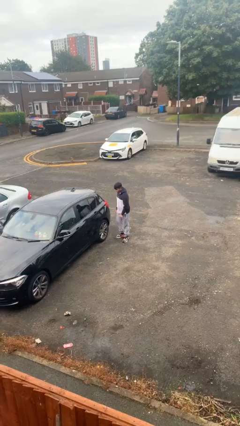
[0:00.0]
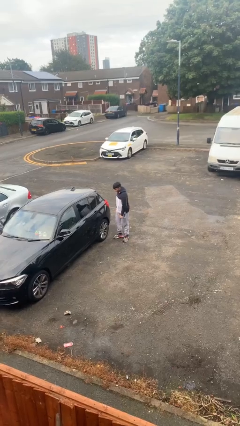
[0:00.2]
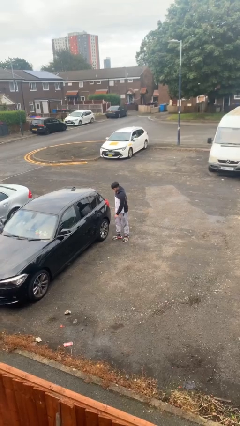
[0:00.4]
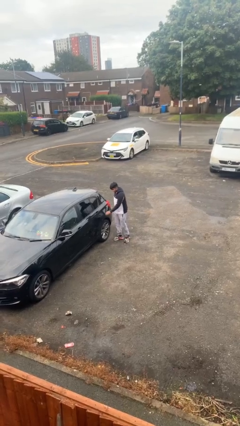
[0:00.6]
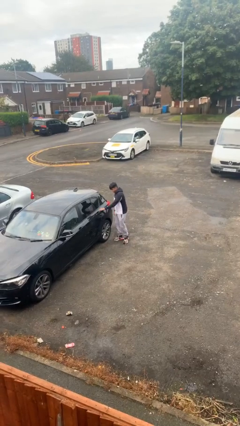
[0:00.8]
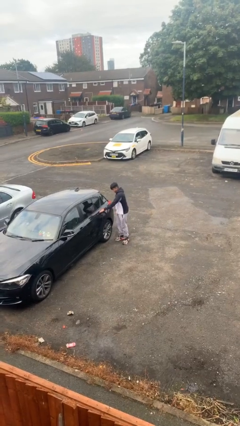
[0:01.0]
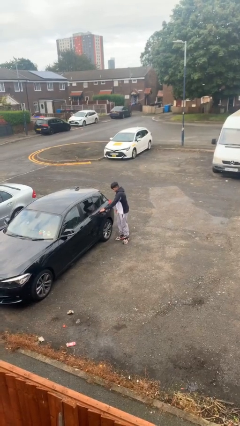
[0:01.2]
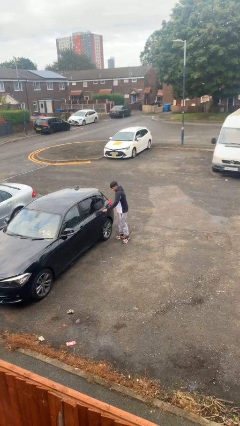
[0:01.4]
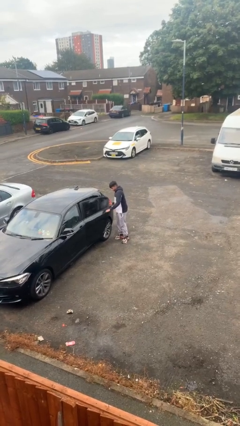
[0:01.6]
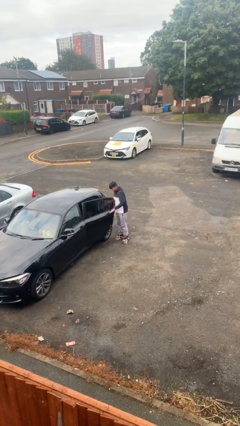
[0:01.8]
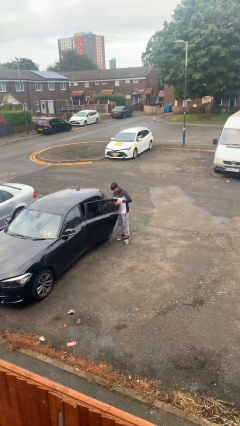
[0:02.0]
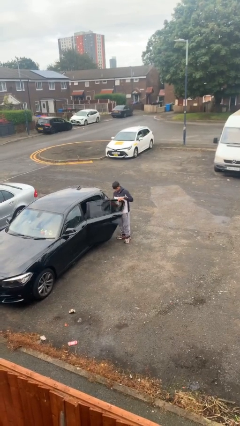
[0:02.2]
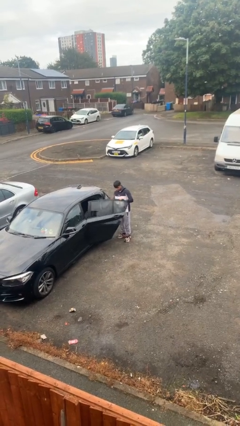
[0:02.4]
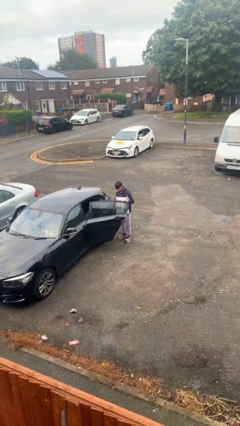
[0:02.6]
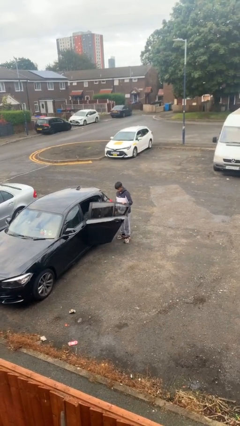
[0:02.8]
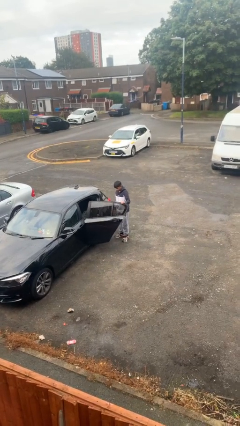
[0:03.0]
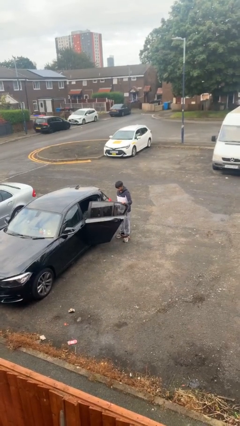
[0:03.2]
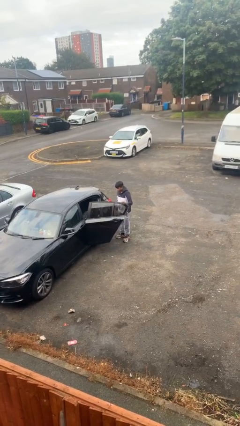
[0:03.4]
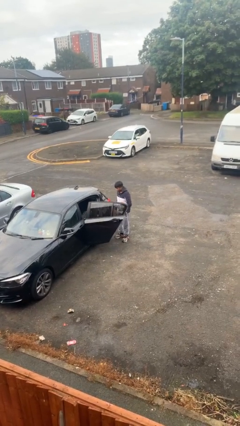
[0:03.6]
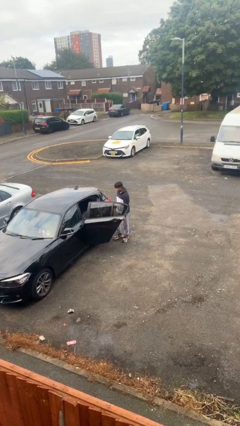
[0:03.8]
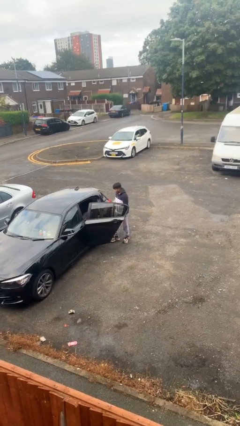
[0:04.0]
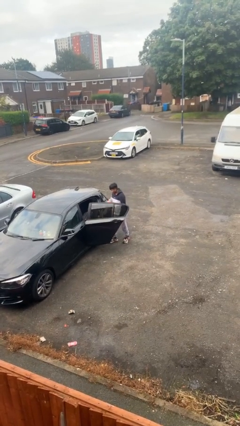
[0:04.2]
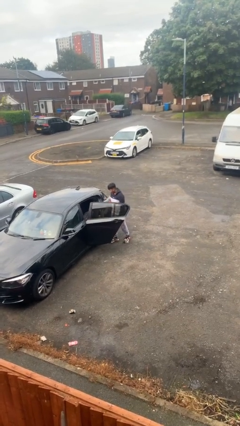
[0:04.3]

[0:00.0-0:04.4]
person opens car door

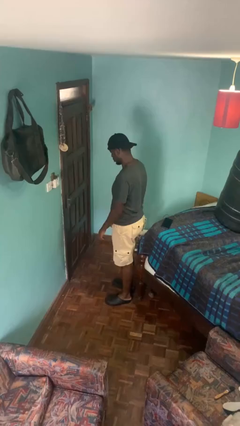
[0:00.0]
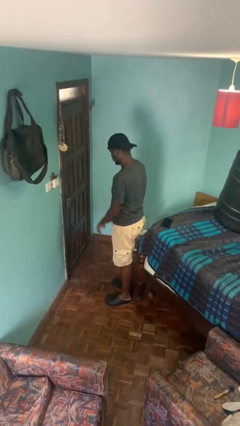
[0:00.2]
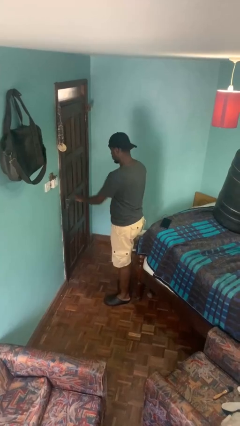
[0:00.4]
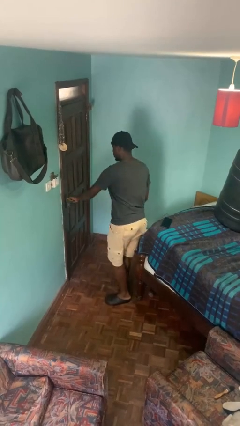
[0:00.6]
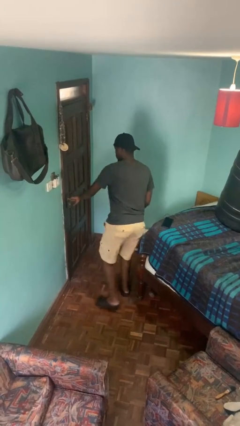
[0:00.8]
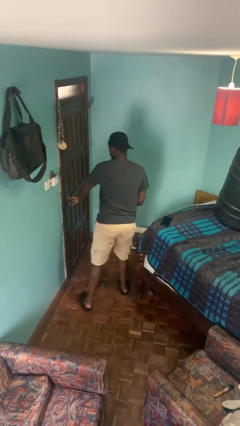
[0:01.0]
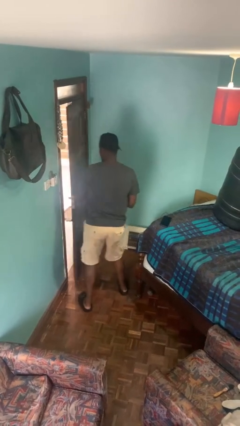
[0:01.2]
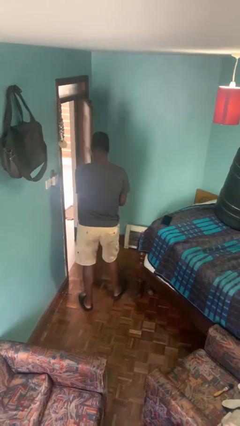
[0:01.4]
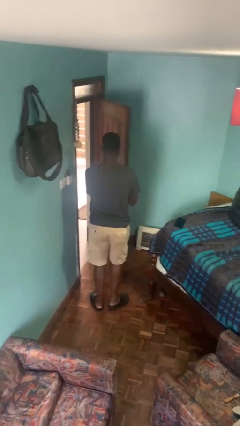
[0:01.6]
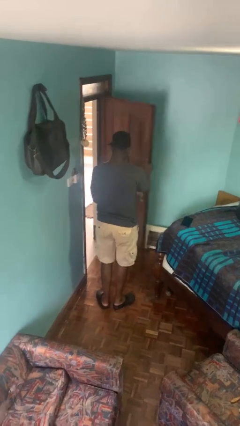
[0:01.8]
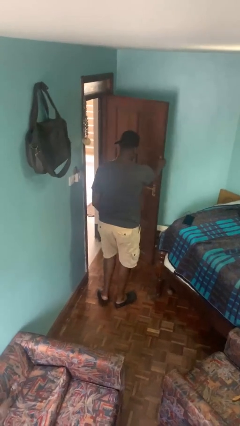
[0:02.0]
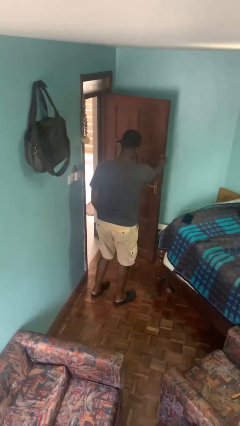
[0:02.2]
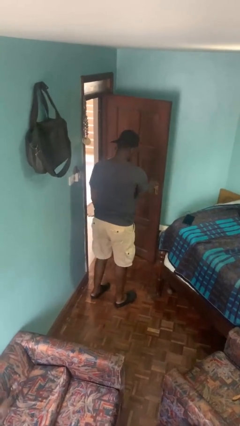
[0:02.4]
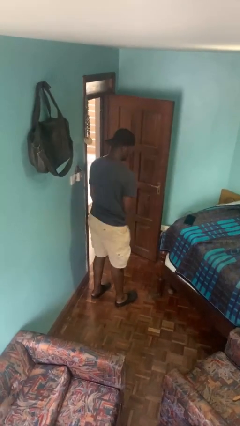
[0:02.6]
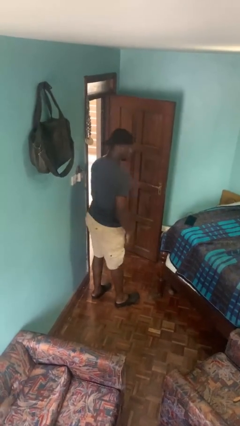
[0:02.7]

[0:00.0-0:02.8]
person opens facility door

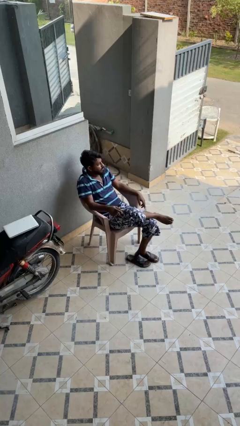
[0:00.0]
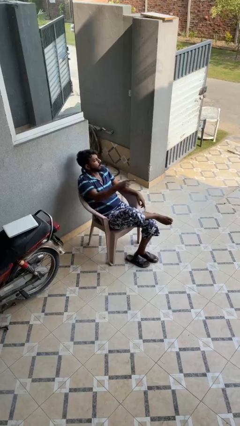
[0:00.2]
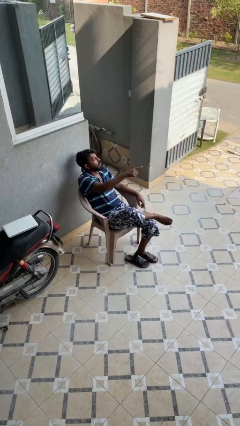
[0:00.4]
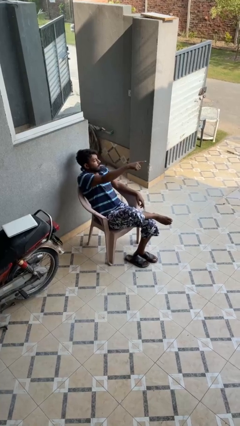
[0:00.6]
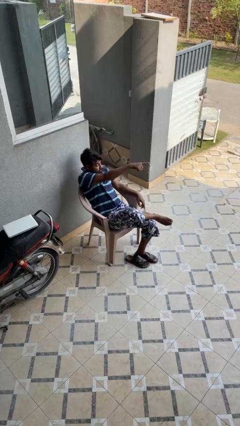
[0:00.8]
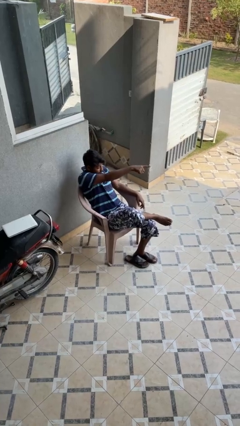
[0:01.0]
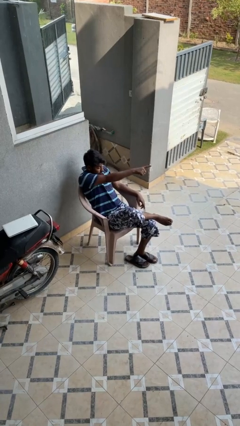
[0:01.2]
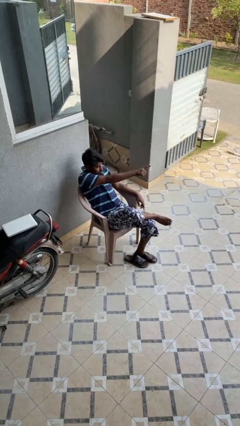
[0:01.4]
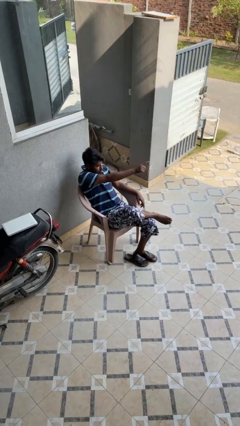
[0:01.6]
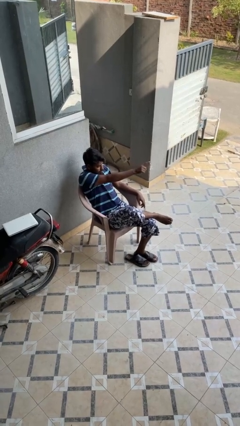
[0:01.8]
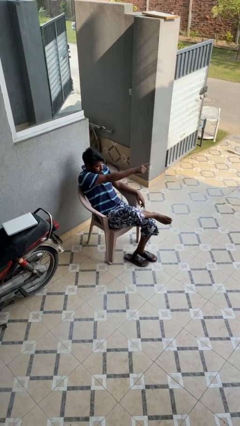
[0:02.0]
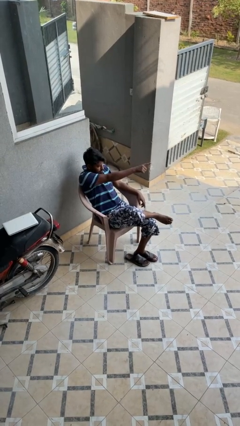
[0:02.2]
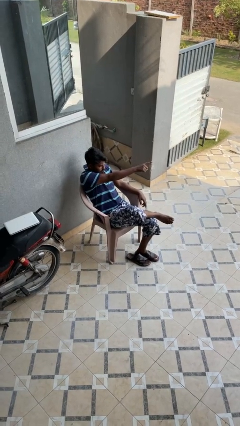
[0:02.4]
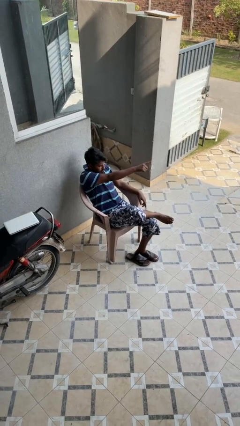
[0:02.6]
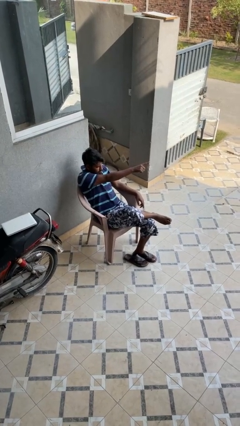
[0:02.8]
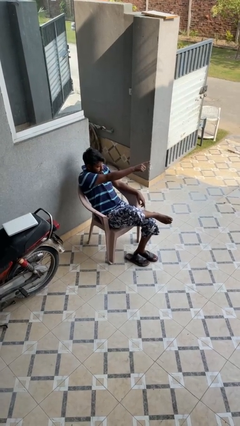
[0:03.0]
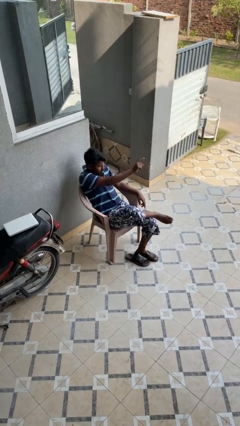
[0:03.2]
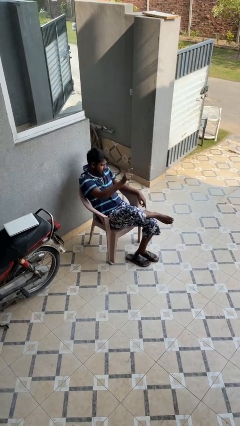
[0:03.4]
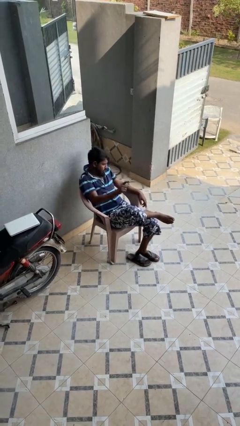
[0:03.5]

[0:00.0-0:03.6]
person points at person

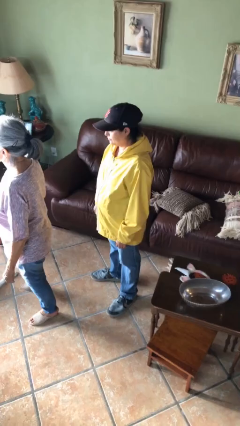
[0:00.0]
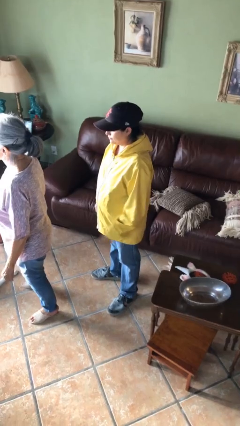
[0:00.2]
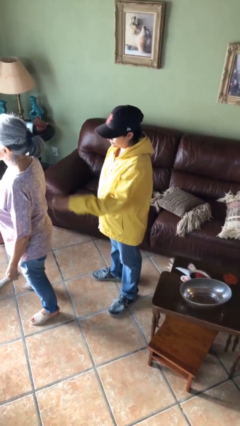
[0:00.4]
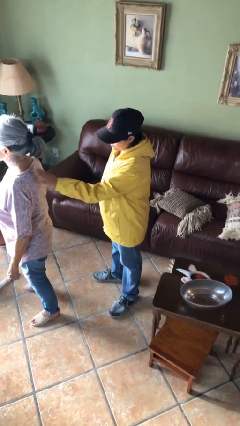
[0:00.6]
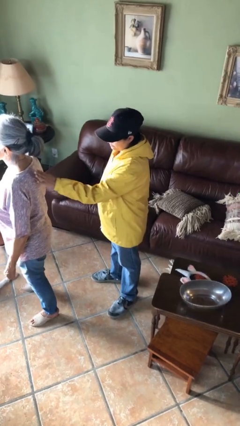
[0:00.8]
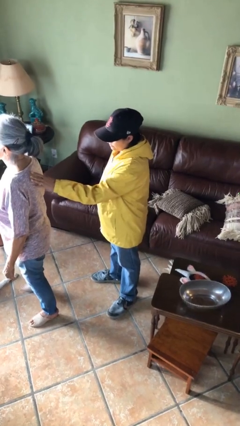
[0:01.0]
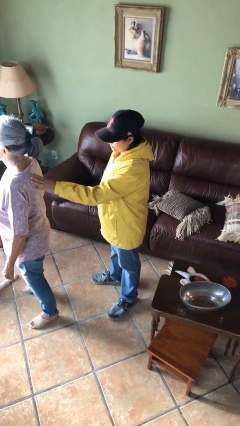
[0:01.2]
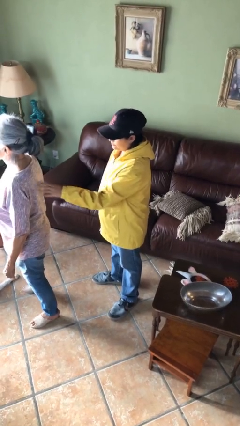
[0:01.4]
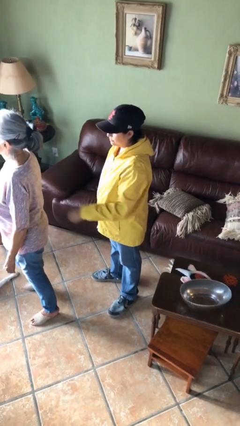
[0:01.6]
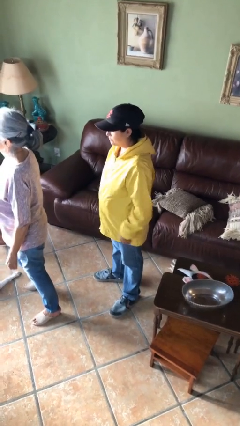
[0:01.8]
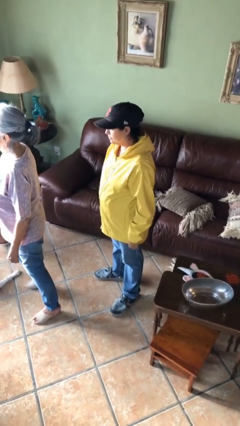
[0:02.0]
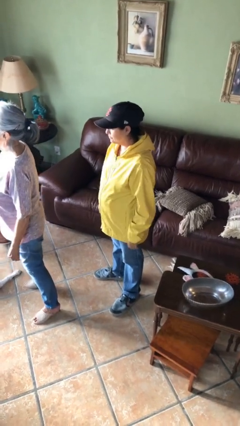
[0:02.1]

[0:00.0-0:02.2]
person touches back of person

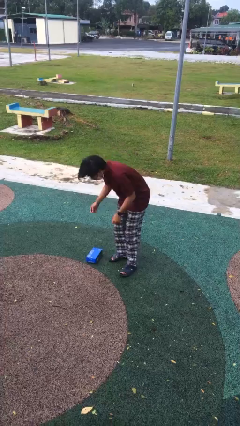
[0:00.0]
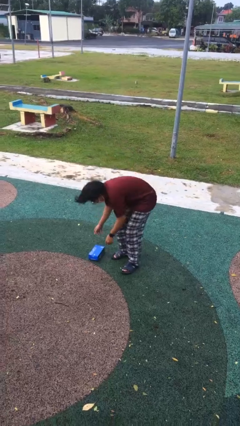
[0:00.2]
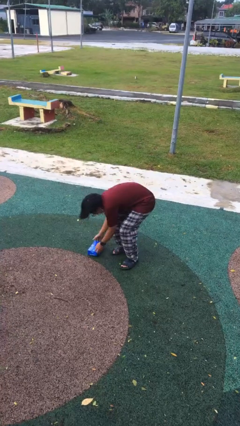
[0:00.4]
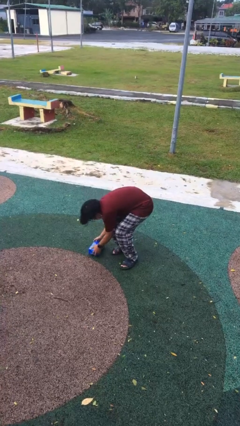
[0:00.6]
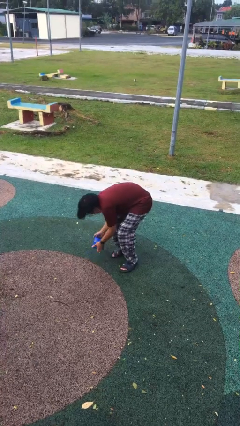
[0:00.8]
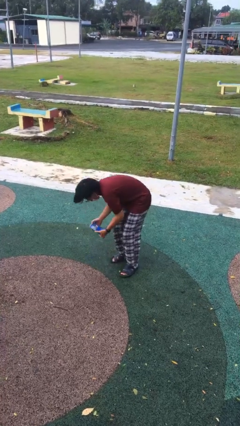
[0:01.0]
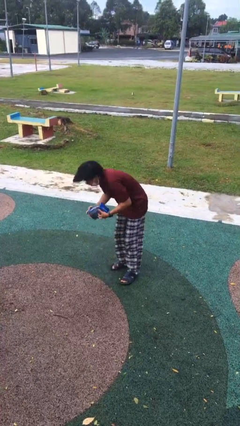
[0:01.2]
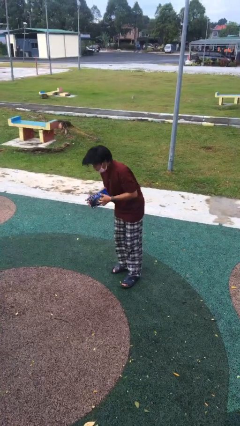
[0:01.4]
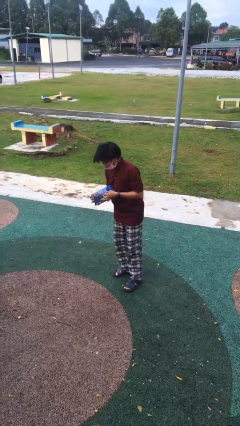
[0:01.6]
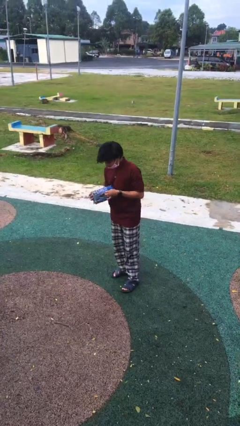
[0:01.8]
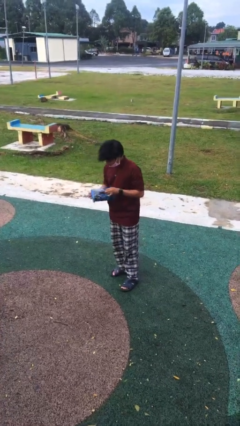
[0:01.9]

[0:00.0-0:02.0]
person picks up object from floor

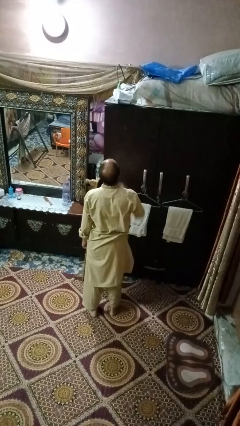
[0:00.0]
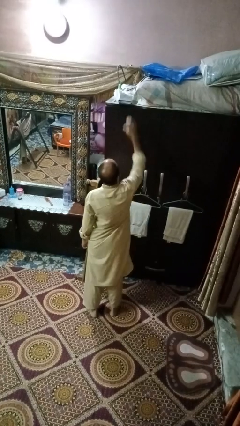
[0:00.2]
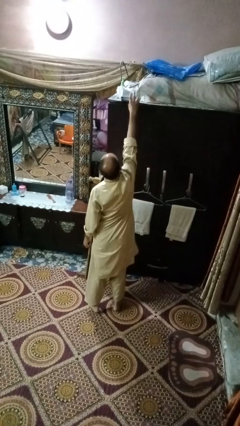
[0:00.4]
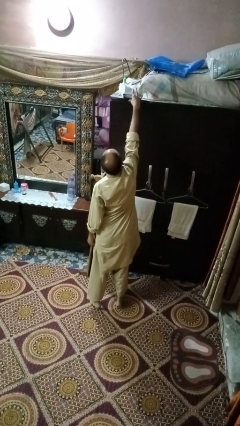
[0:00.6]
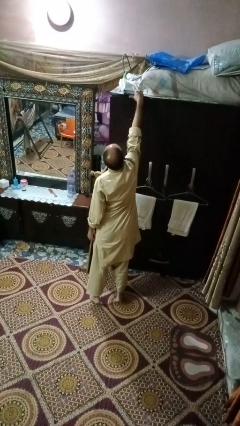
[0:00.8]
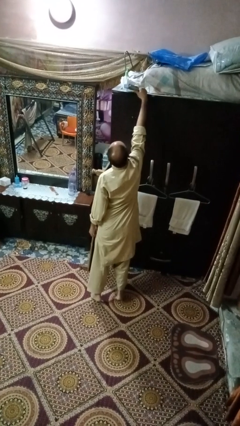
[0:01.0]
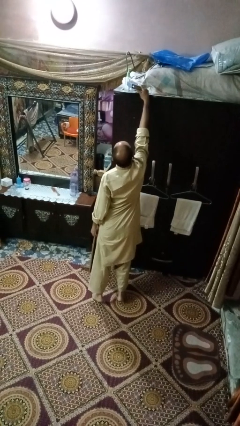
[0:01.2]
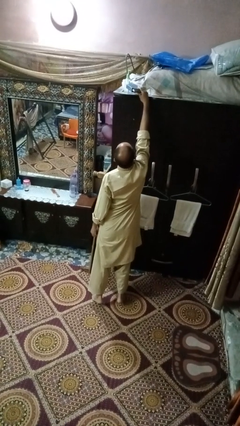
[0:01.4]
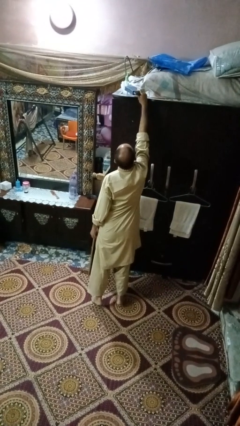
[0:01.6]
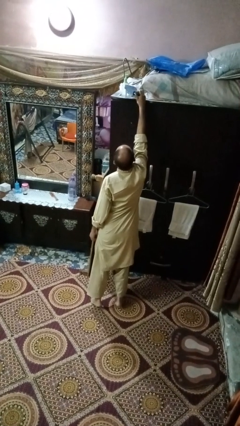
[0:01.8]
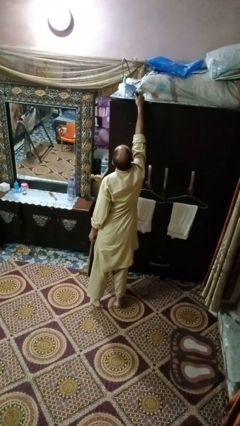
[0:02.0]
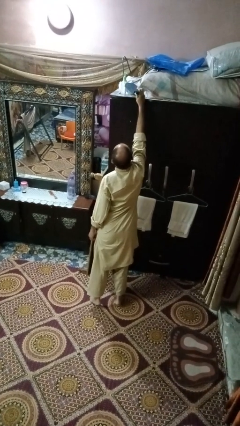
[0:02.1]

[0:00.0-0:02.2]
person picks up object from countertop
